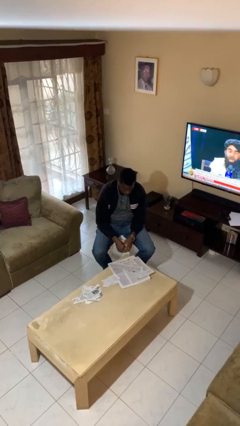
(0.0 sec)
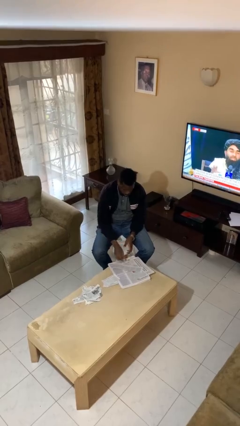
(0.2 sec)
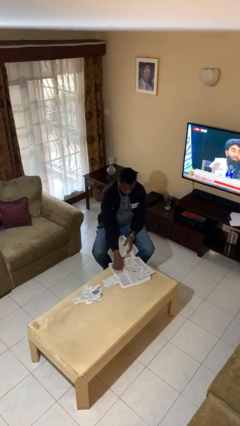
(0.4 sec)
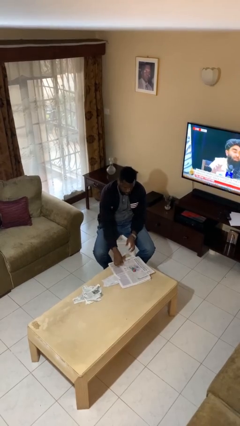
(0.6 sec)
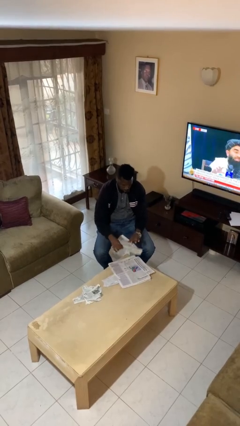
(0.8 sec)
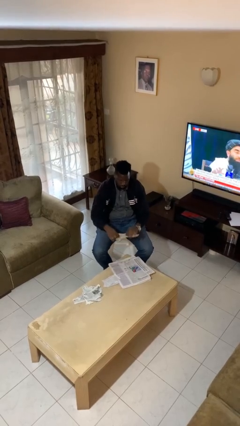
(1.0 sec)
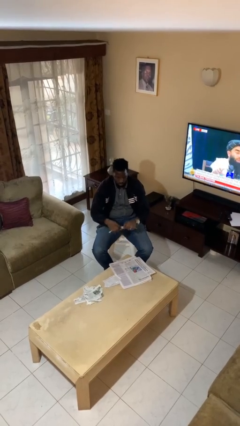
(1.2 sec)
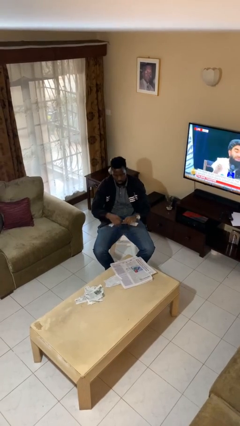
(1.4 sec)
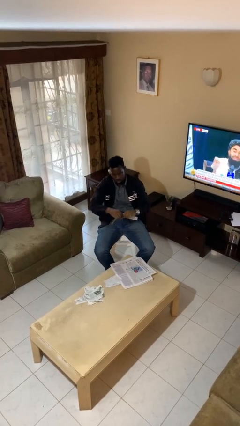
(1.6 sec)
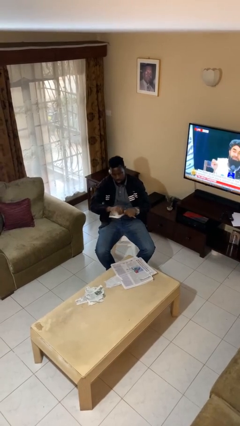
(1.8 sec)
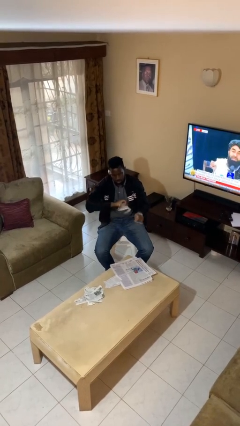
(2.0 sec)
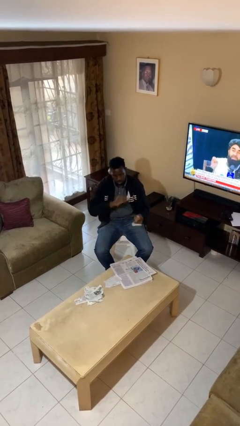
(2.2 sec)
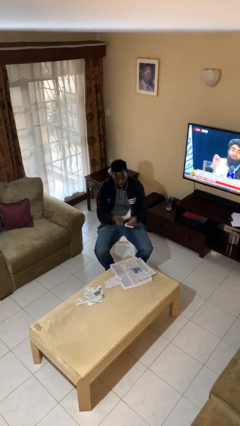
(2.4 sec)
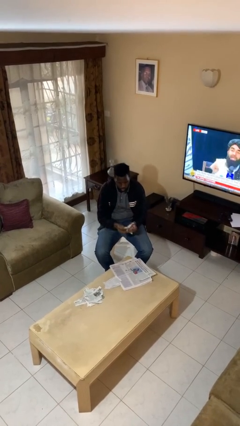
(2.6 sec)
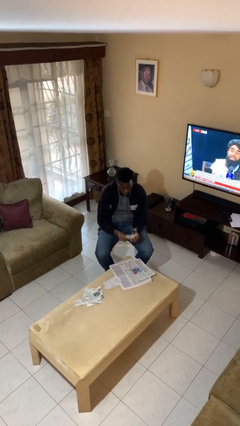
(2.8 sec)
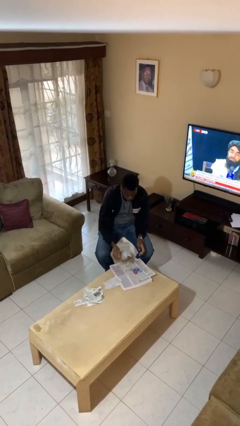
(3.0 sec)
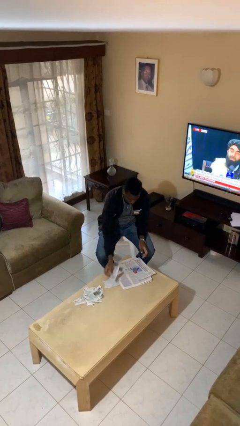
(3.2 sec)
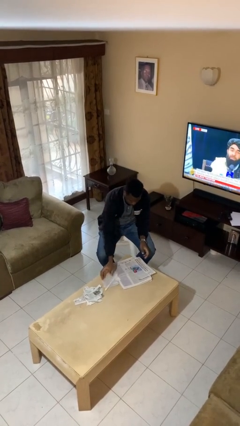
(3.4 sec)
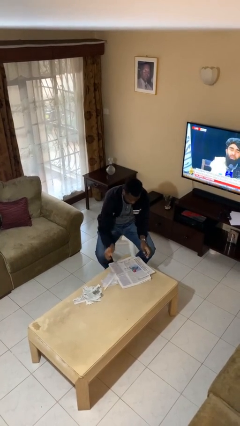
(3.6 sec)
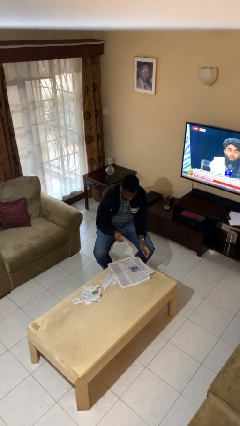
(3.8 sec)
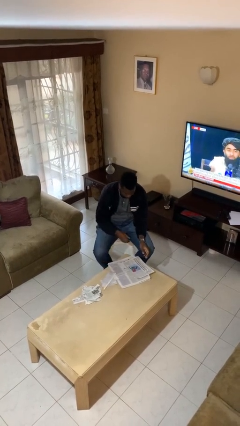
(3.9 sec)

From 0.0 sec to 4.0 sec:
person tears paper

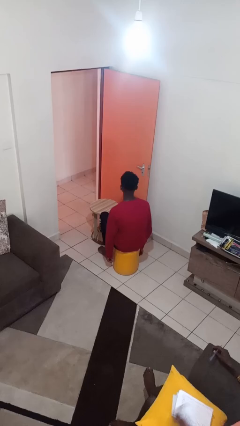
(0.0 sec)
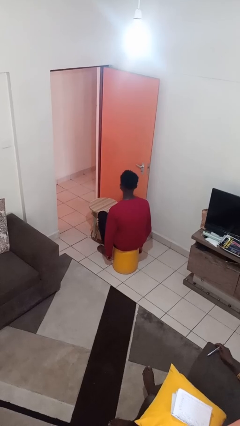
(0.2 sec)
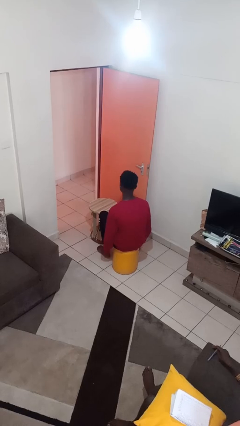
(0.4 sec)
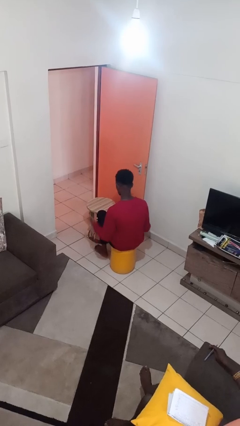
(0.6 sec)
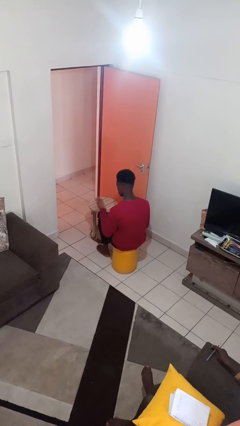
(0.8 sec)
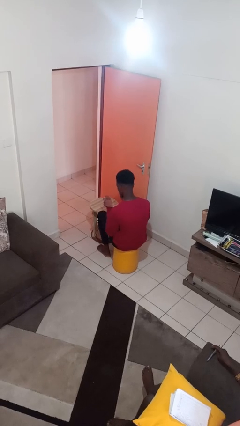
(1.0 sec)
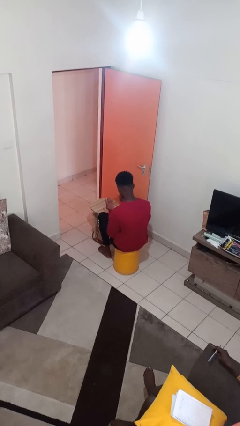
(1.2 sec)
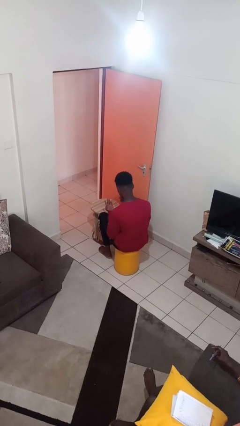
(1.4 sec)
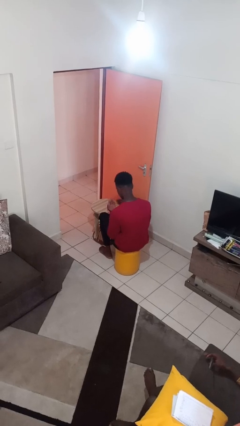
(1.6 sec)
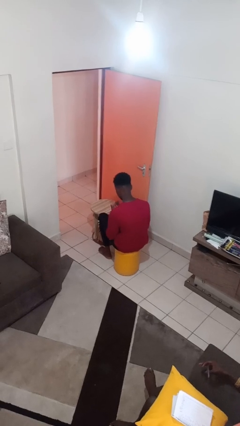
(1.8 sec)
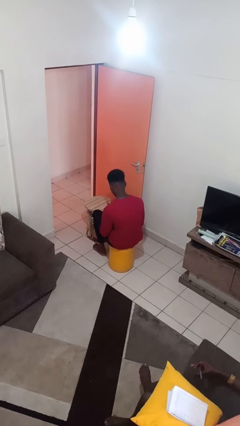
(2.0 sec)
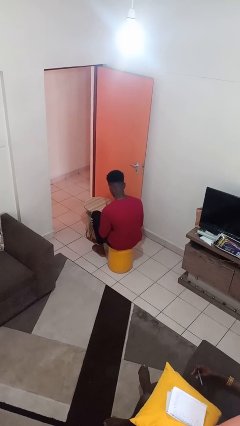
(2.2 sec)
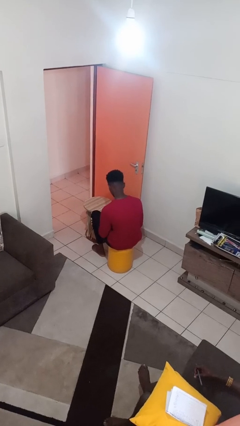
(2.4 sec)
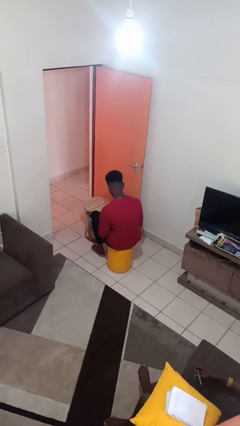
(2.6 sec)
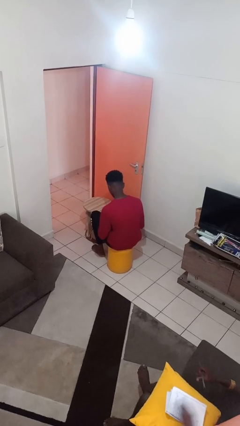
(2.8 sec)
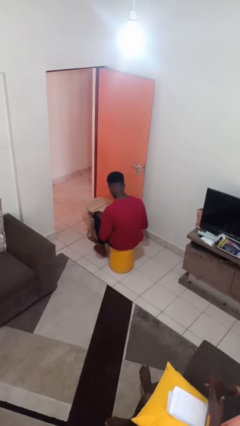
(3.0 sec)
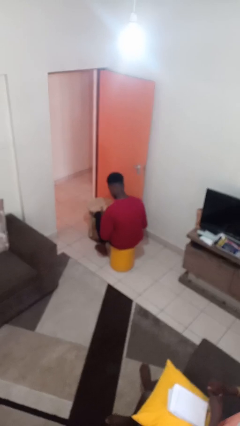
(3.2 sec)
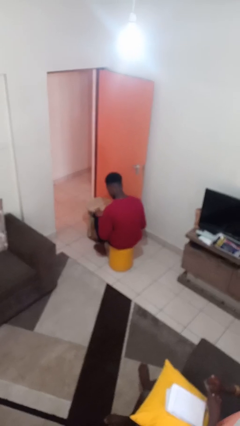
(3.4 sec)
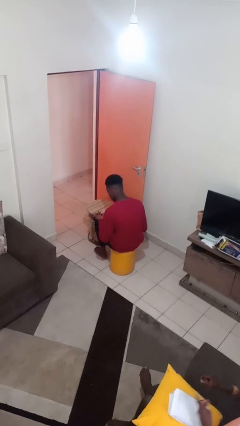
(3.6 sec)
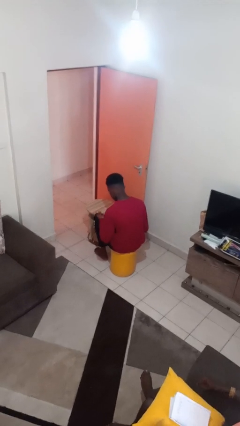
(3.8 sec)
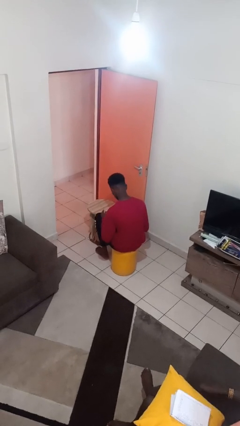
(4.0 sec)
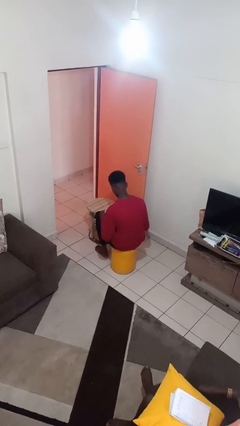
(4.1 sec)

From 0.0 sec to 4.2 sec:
person looks at hands in lap

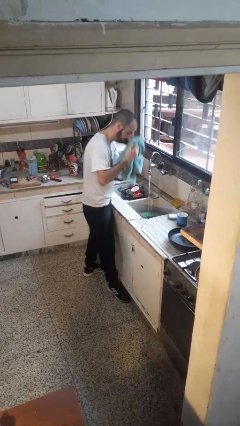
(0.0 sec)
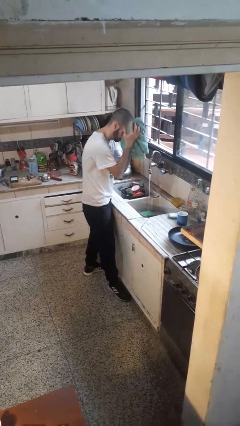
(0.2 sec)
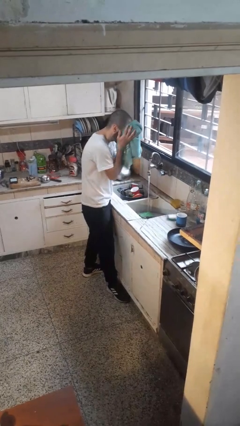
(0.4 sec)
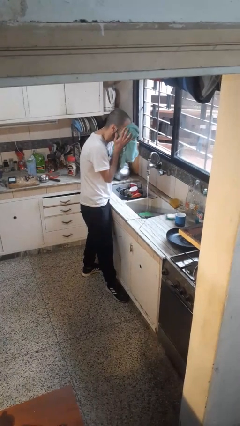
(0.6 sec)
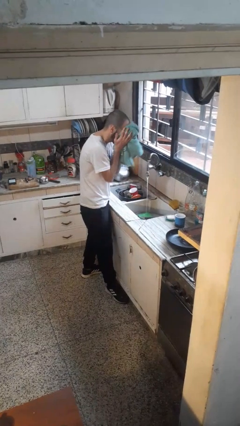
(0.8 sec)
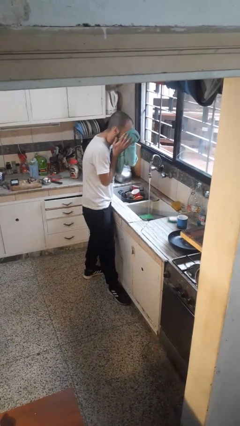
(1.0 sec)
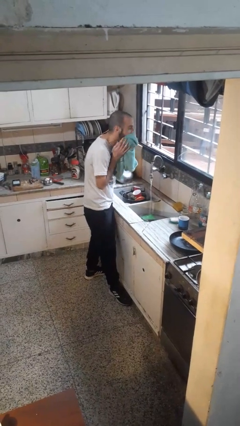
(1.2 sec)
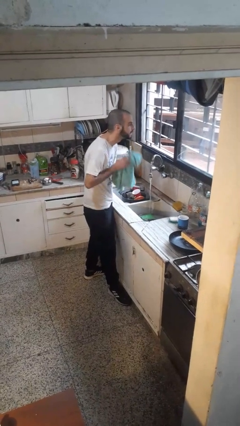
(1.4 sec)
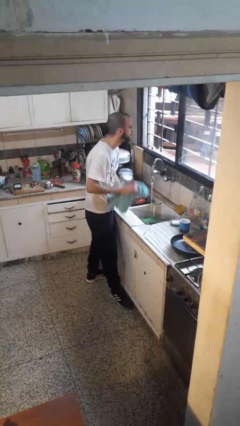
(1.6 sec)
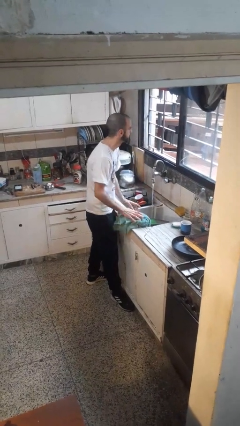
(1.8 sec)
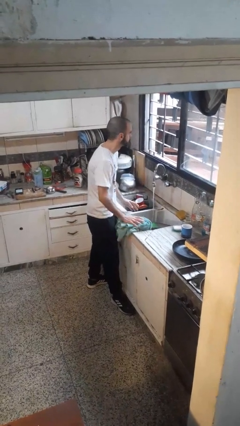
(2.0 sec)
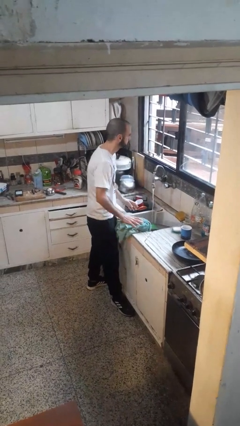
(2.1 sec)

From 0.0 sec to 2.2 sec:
person dries face with towel

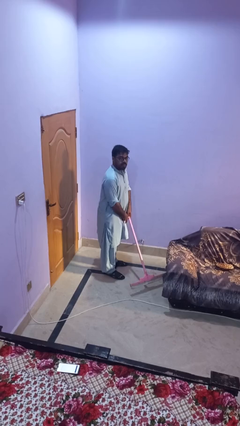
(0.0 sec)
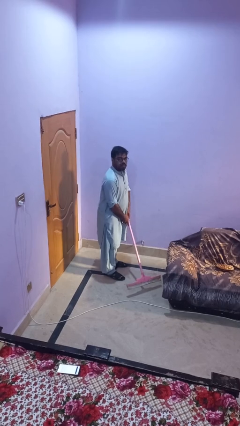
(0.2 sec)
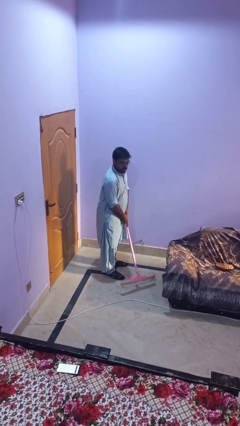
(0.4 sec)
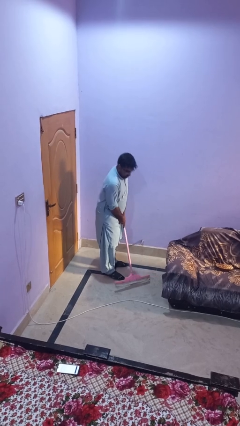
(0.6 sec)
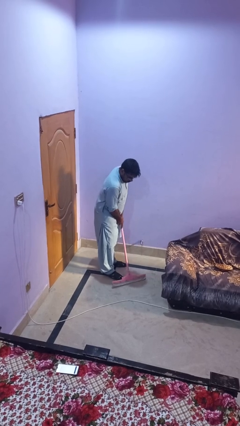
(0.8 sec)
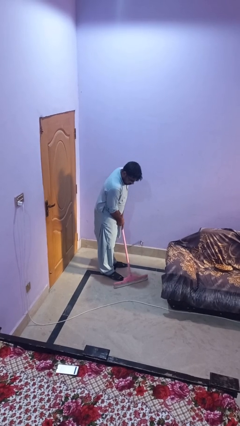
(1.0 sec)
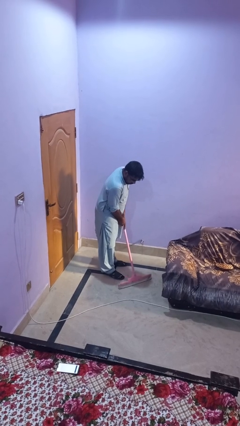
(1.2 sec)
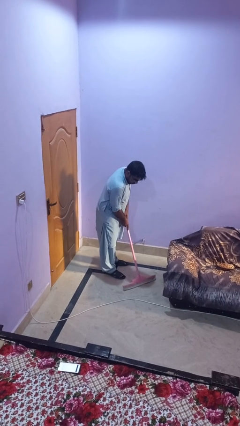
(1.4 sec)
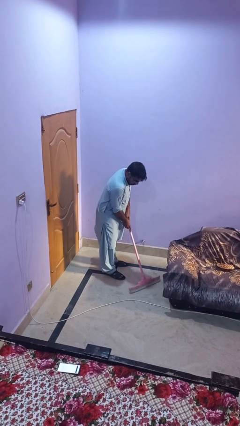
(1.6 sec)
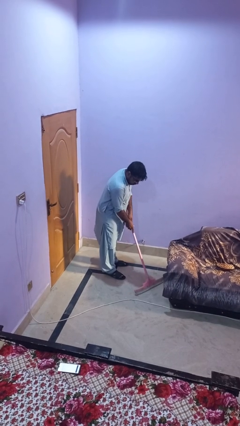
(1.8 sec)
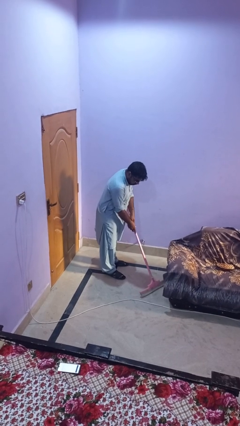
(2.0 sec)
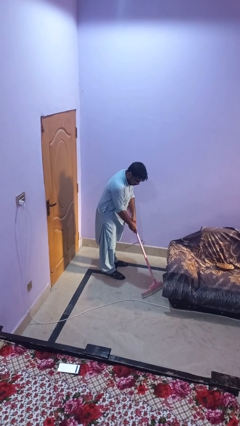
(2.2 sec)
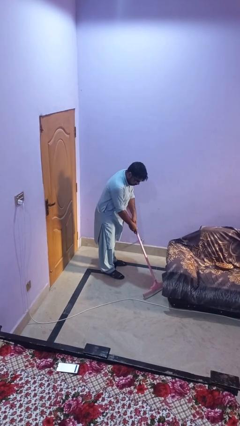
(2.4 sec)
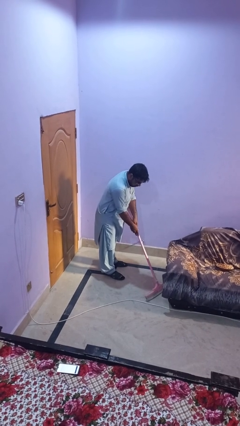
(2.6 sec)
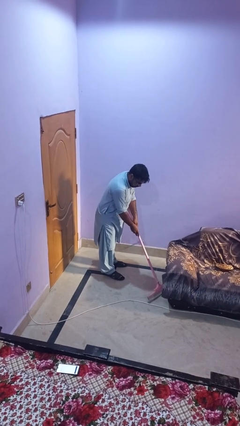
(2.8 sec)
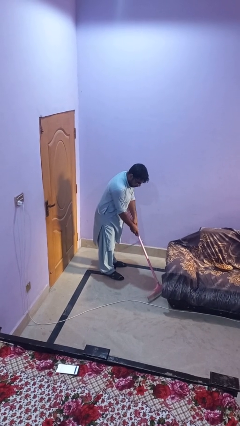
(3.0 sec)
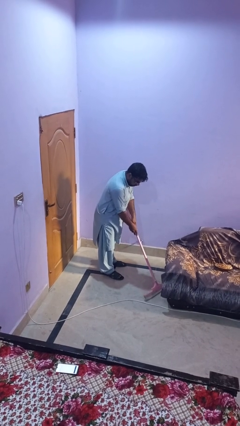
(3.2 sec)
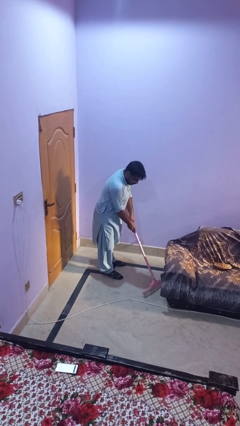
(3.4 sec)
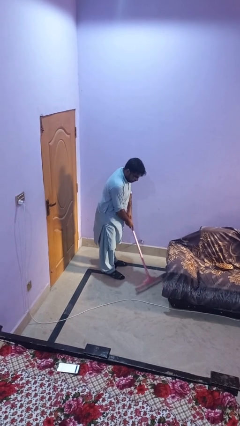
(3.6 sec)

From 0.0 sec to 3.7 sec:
person vacuums carpet

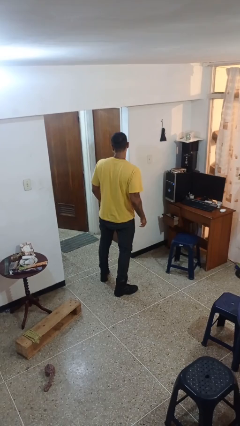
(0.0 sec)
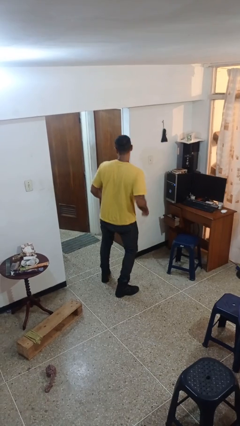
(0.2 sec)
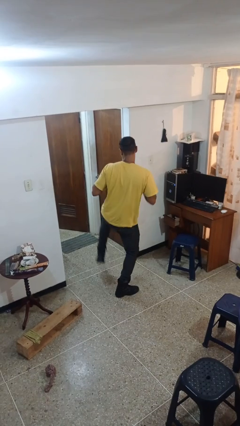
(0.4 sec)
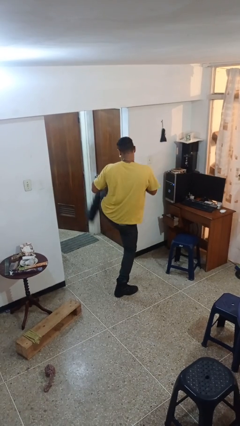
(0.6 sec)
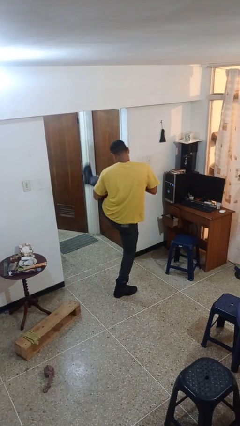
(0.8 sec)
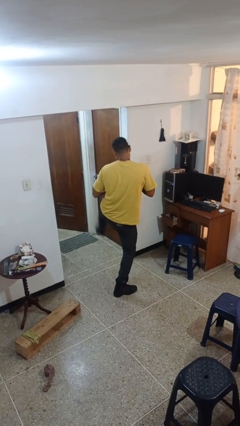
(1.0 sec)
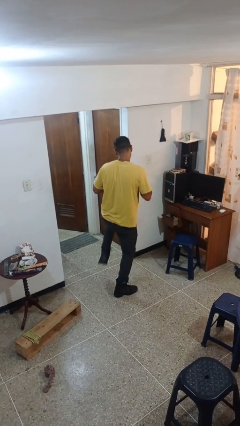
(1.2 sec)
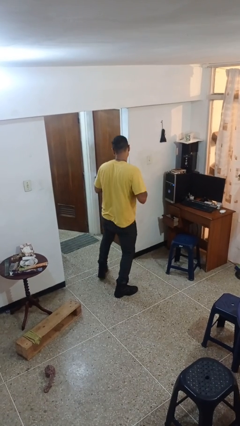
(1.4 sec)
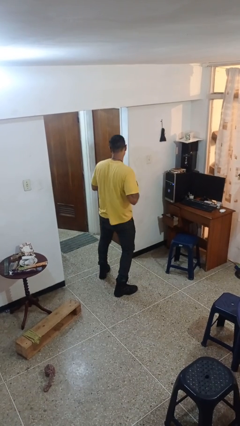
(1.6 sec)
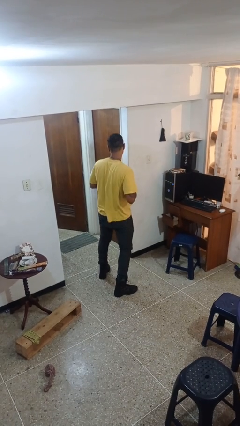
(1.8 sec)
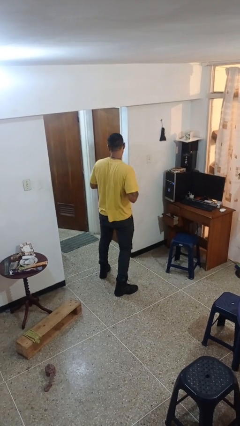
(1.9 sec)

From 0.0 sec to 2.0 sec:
person karate kicks

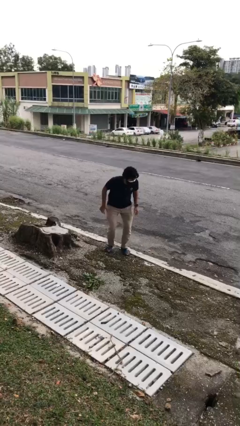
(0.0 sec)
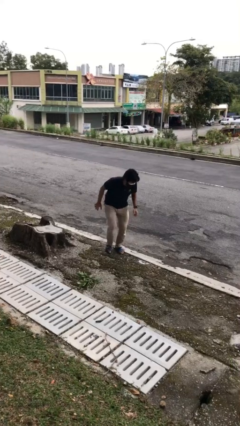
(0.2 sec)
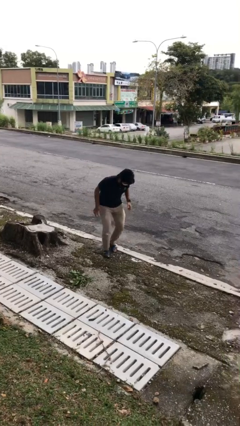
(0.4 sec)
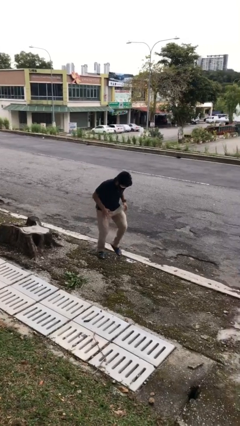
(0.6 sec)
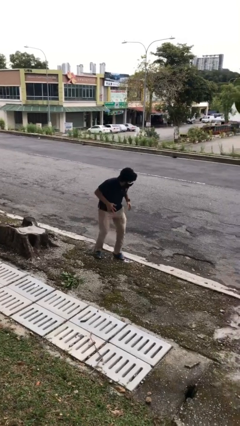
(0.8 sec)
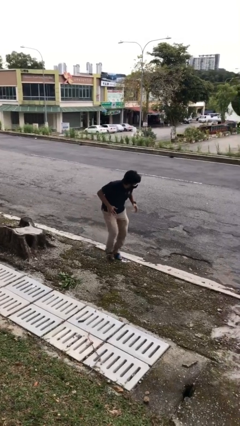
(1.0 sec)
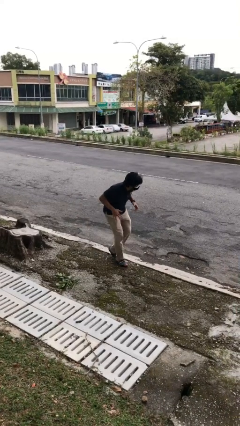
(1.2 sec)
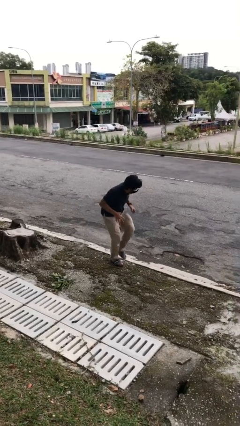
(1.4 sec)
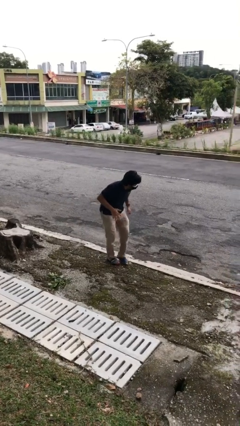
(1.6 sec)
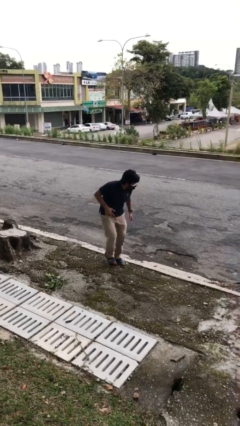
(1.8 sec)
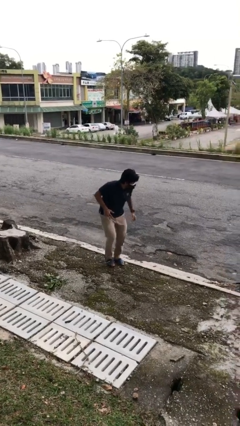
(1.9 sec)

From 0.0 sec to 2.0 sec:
person walks tiptoe
